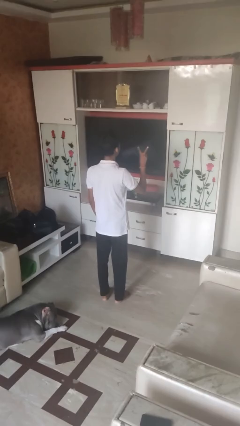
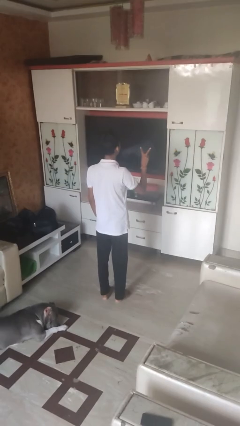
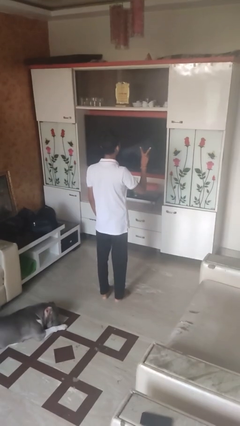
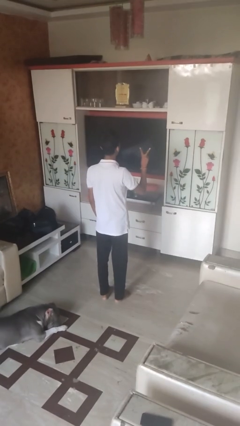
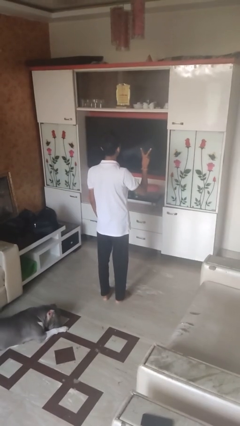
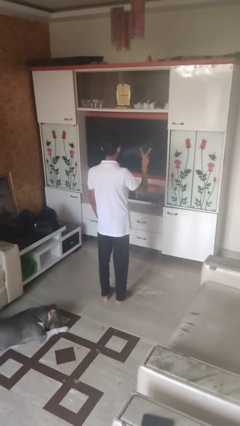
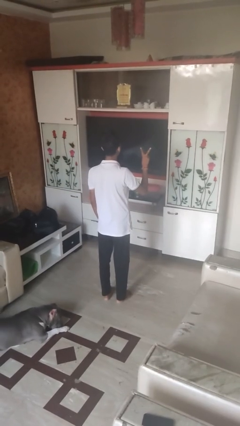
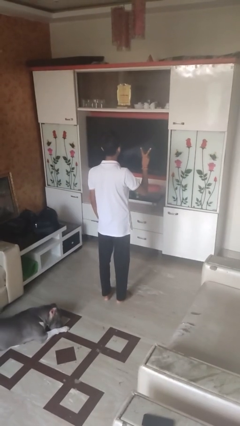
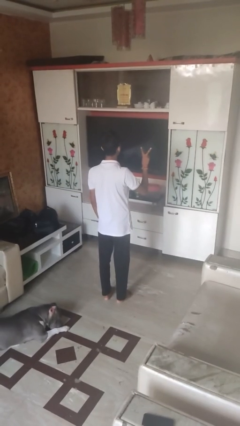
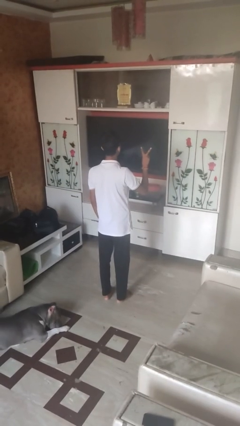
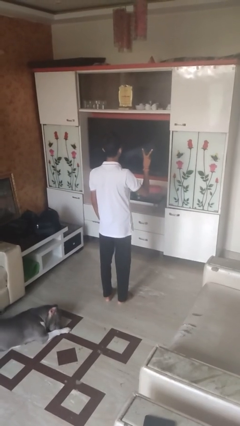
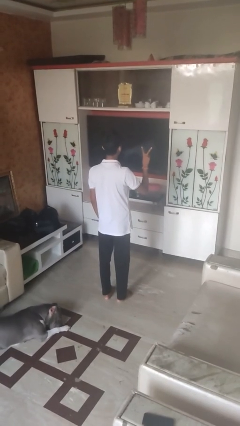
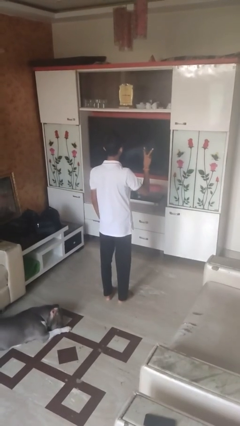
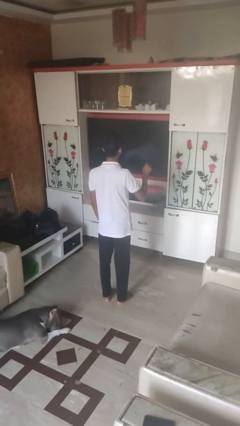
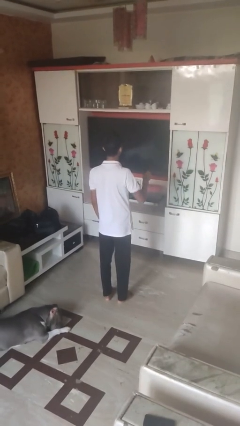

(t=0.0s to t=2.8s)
person gestures peace

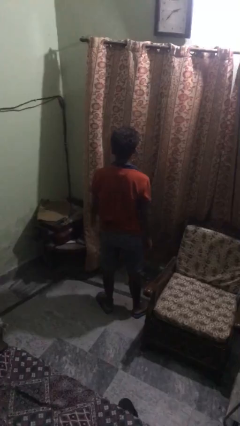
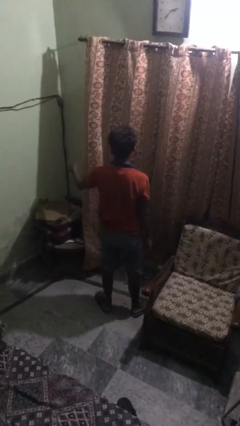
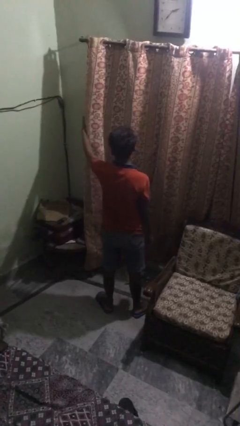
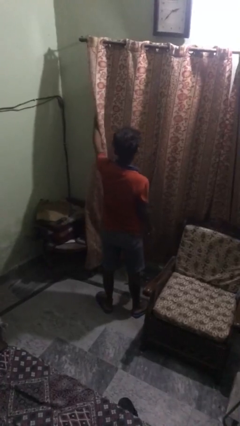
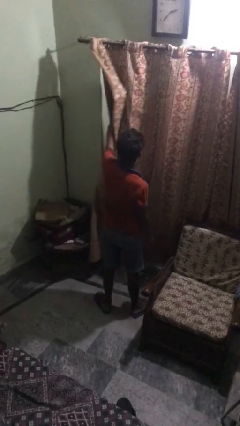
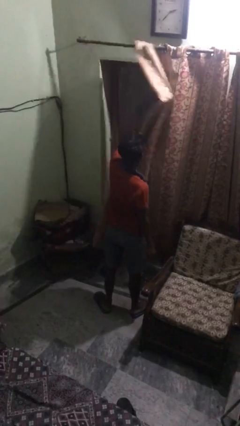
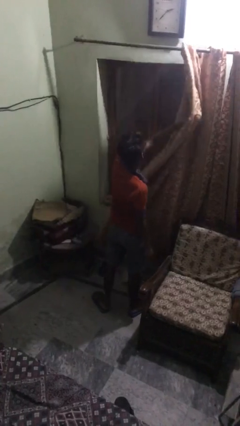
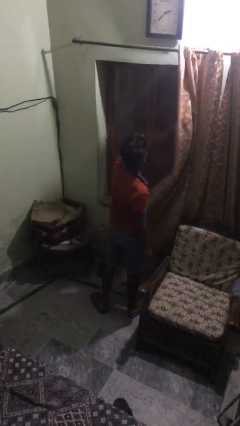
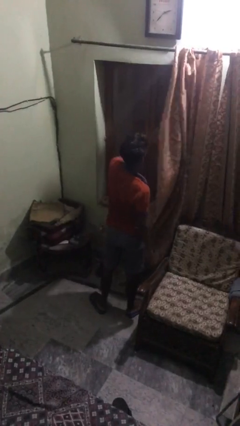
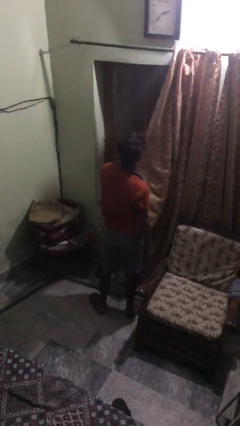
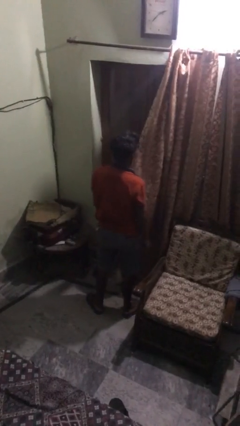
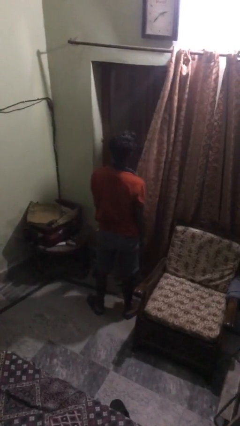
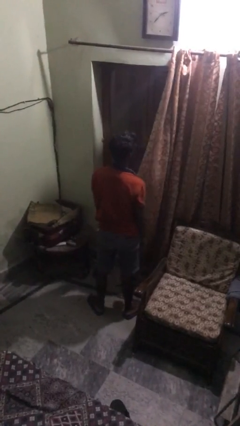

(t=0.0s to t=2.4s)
person opens curtains

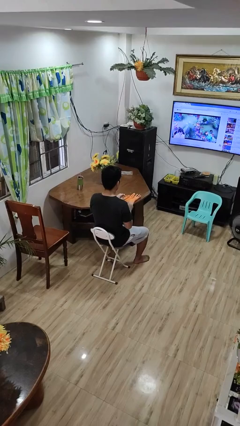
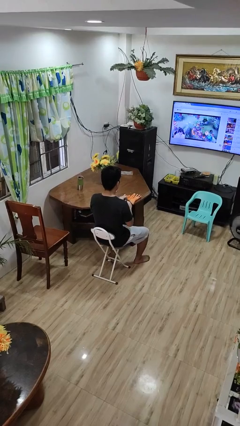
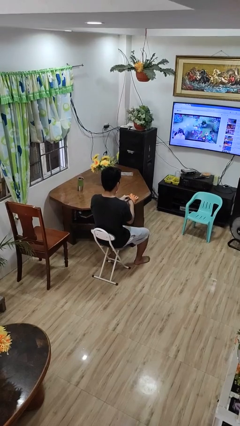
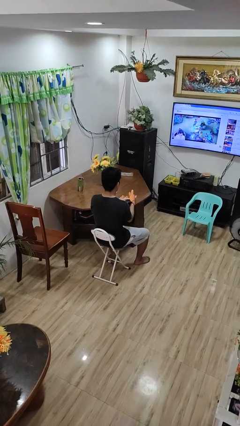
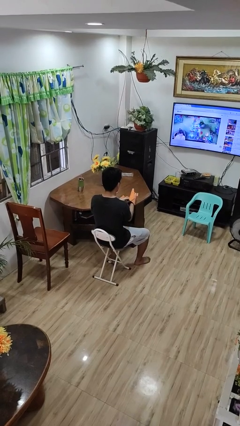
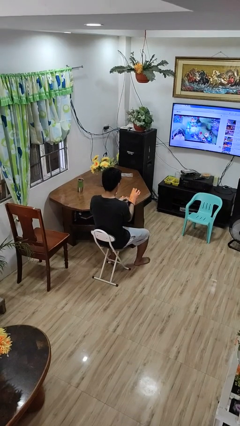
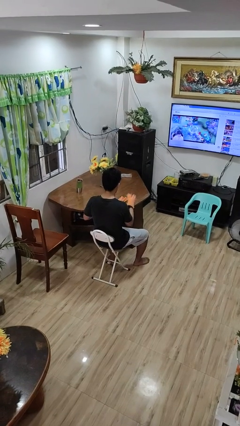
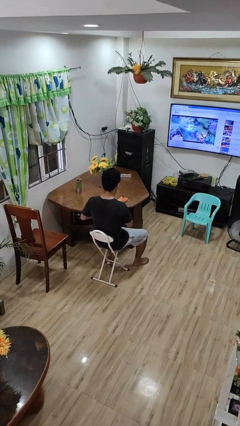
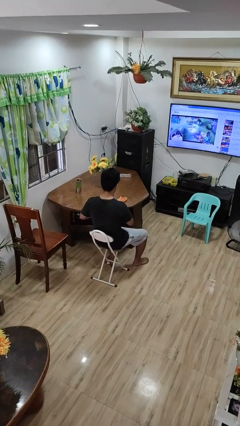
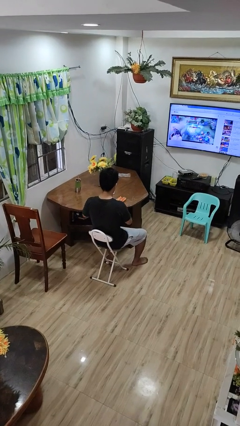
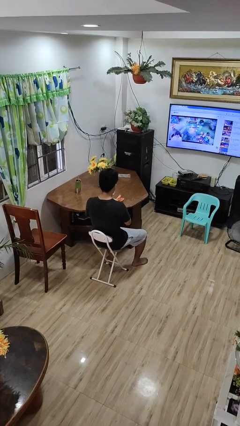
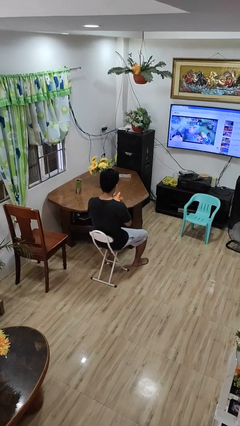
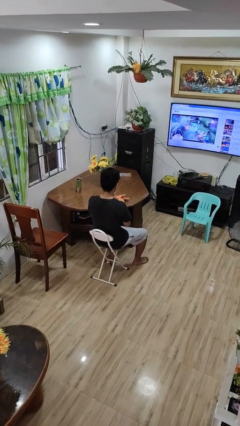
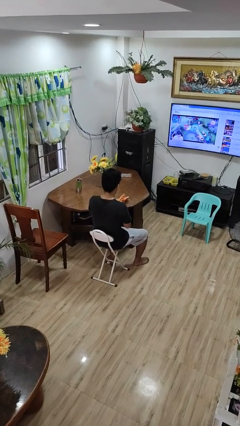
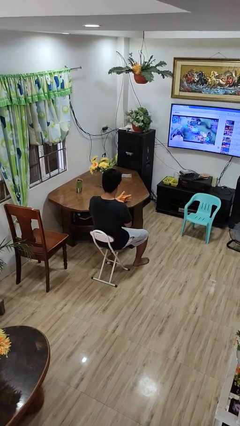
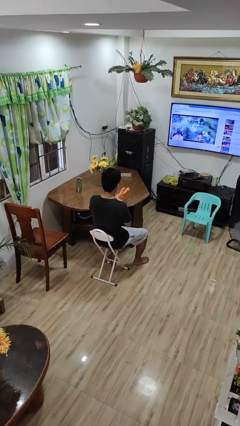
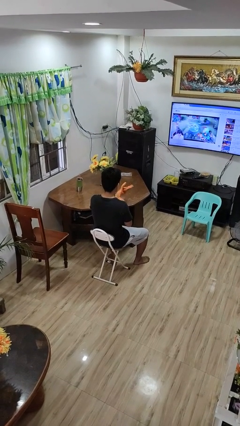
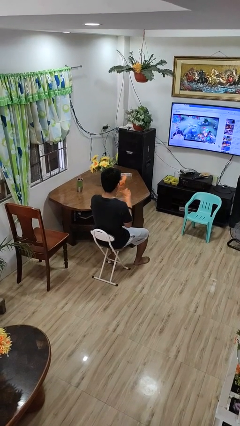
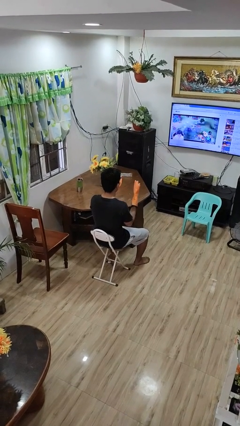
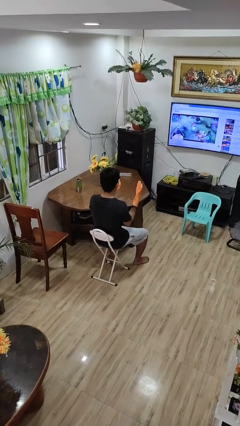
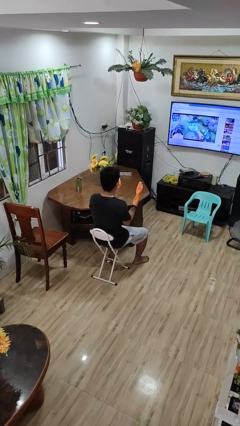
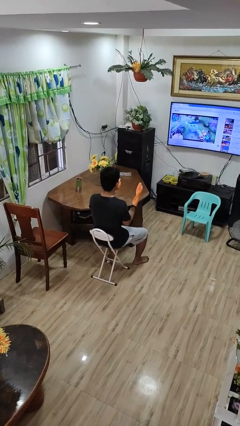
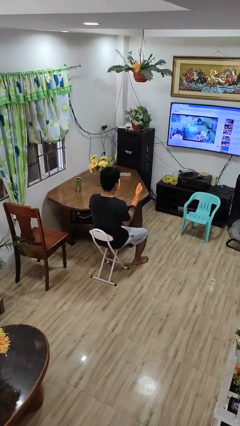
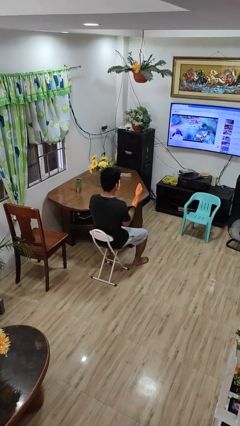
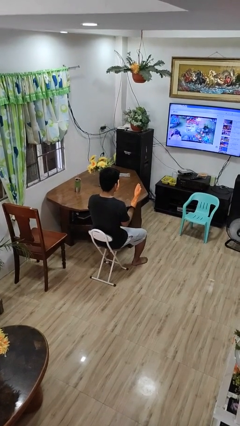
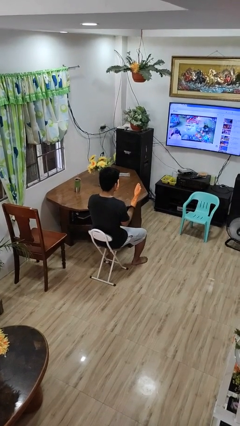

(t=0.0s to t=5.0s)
person puts on gloves

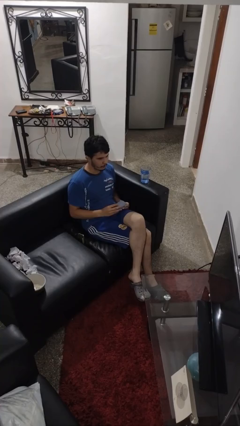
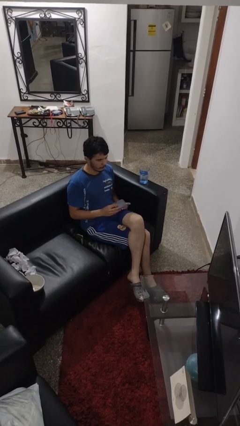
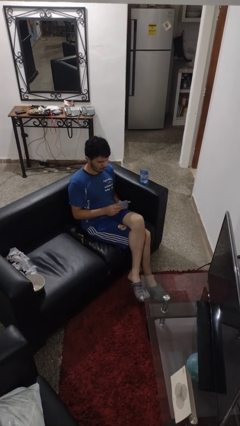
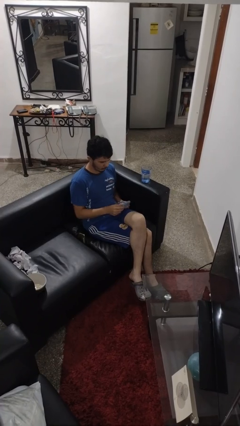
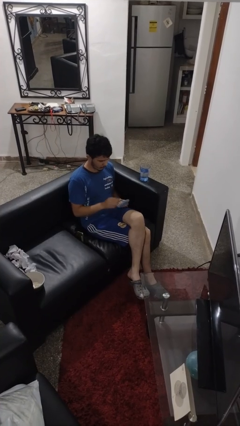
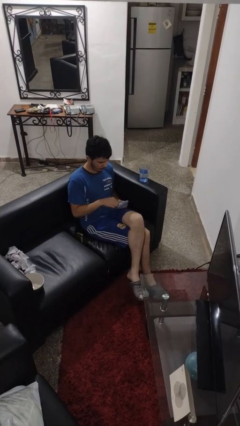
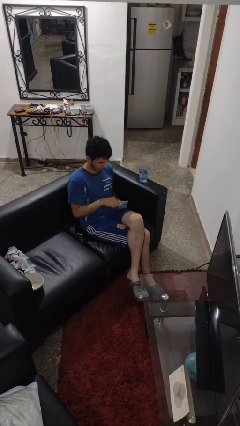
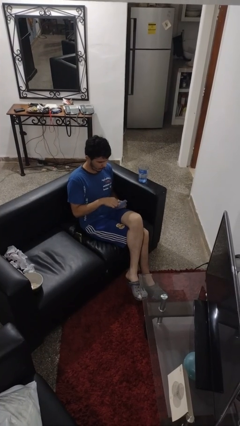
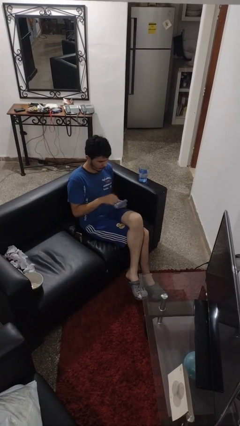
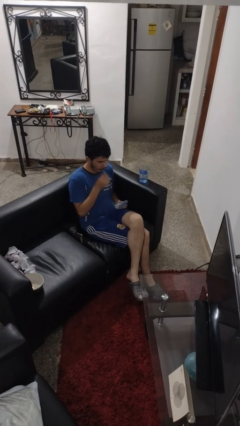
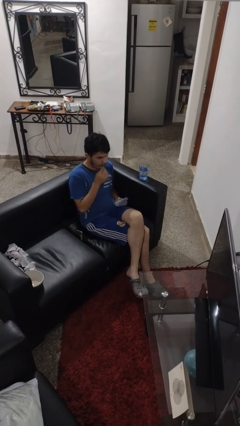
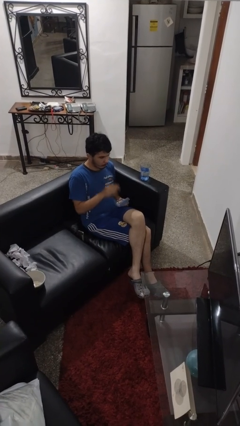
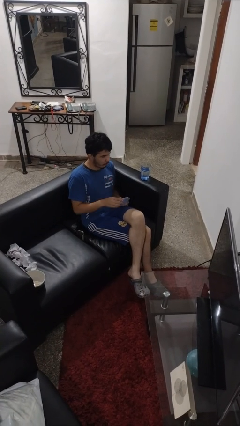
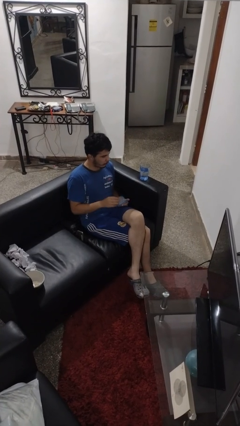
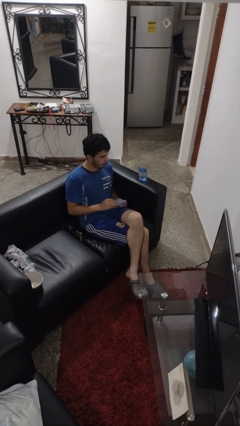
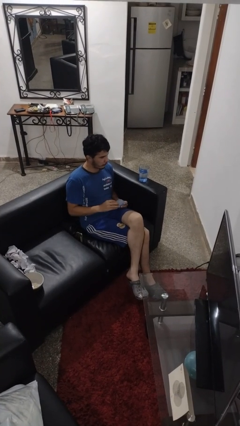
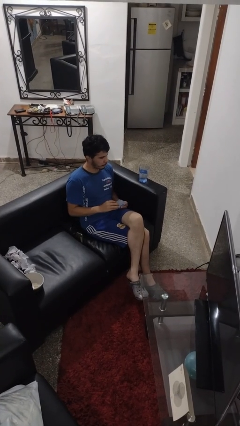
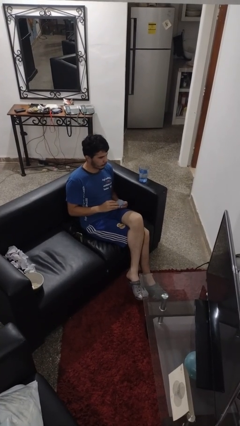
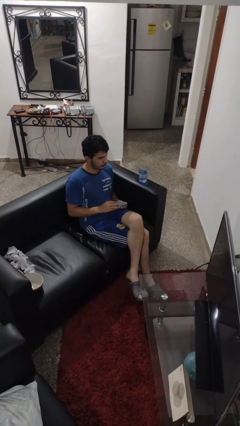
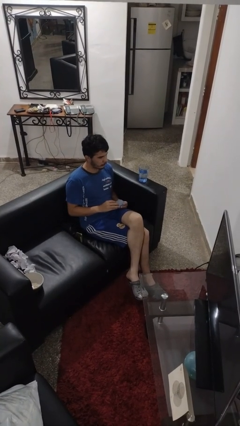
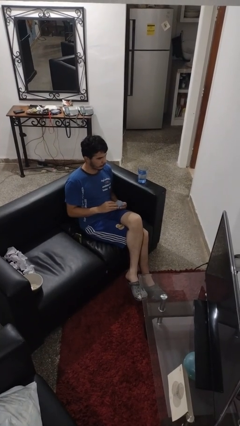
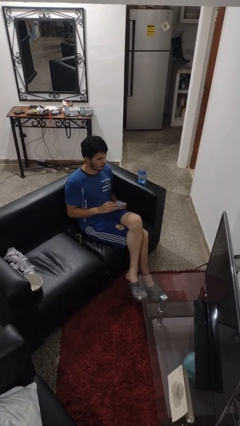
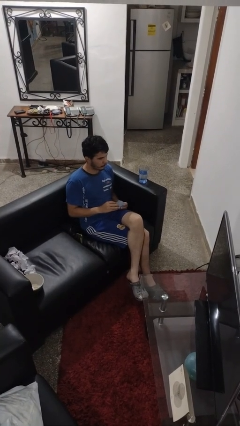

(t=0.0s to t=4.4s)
person takes medicine pills

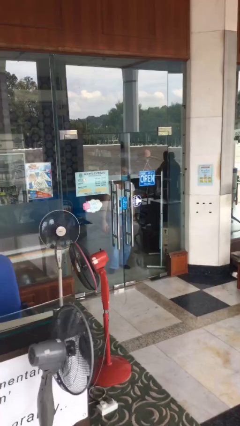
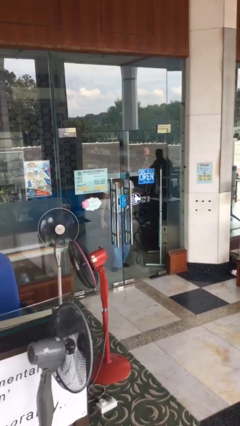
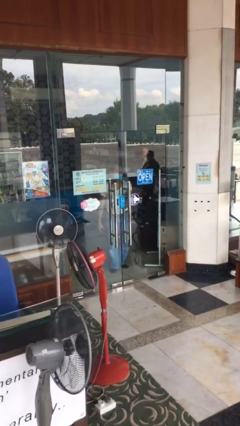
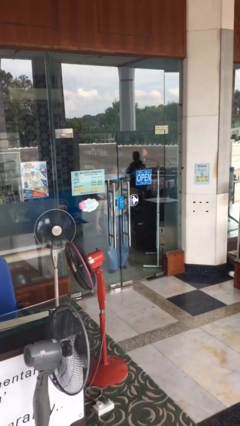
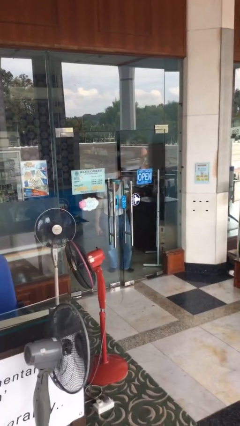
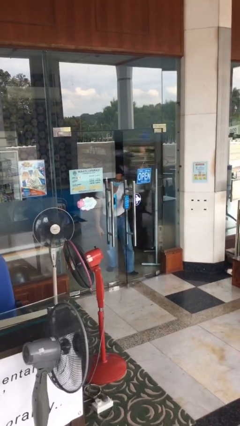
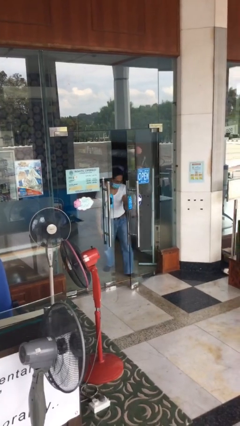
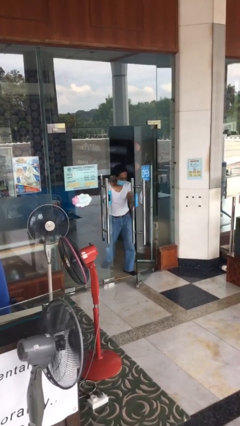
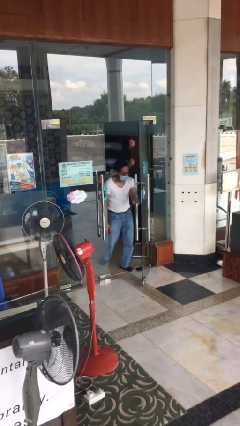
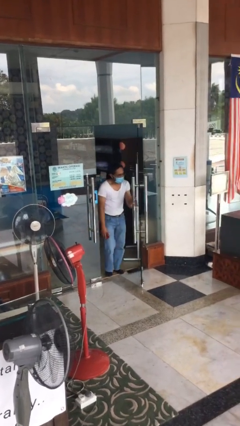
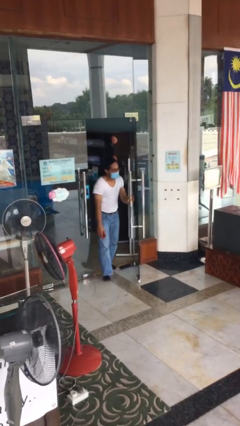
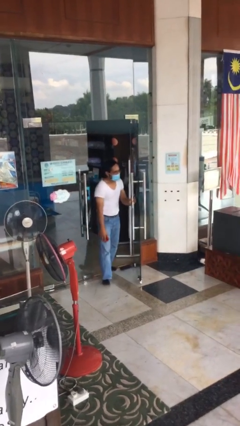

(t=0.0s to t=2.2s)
person opens facility door

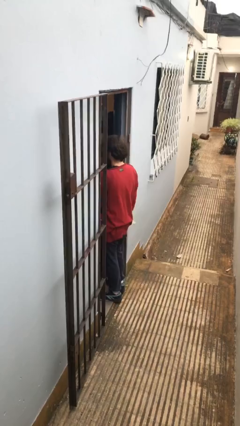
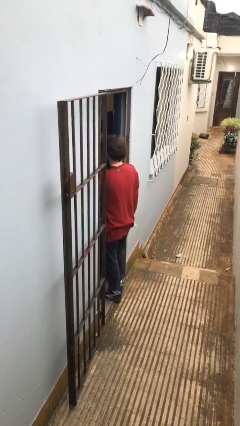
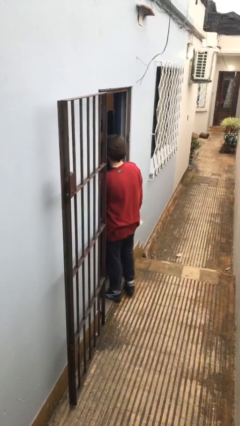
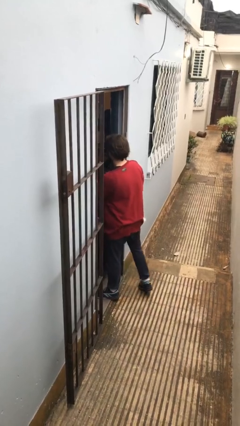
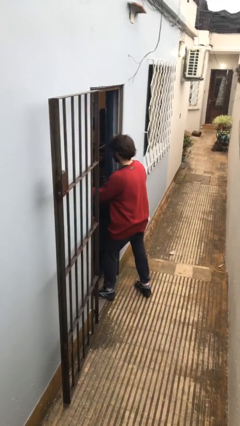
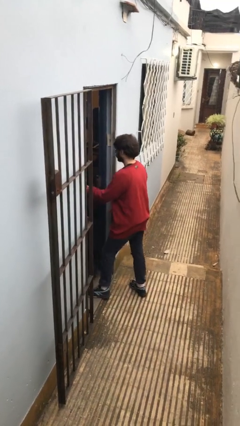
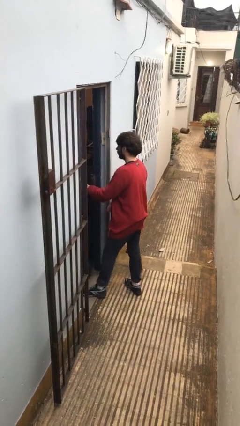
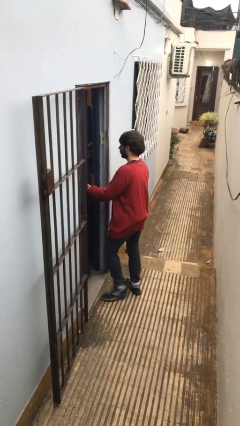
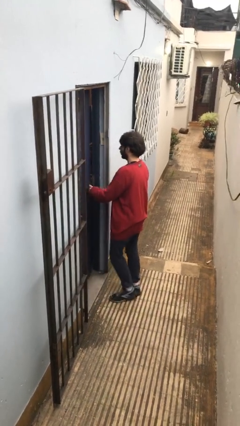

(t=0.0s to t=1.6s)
person closes facility door
